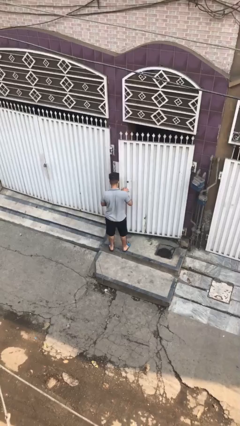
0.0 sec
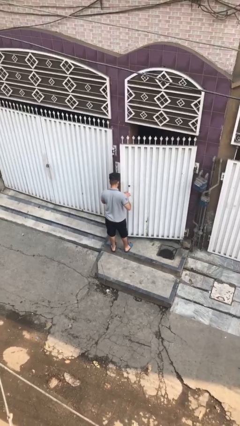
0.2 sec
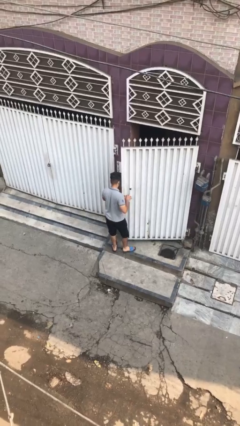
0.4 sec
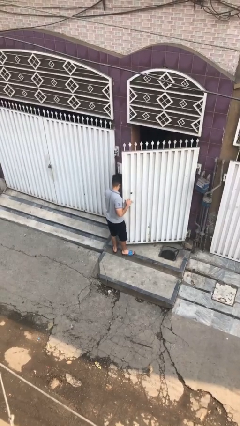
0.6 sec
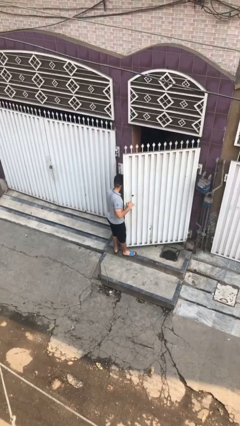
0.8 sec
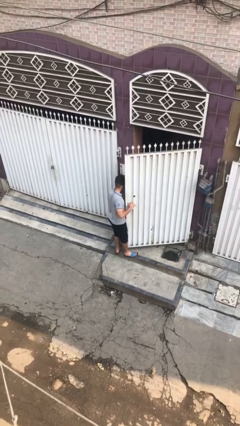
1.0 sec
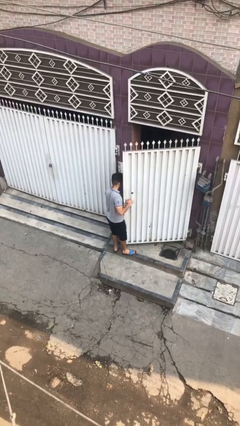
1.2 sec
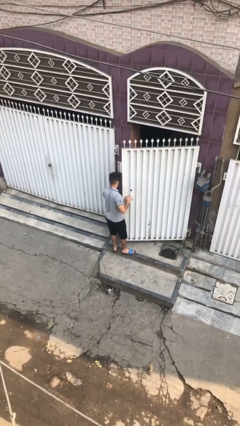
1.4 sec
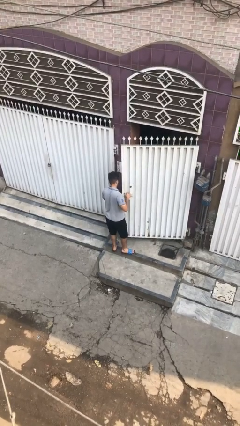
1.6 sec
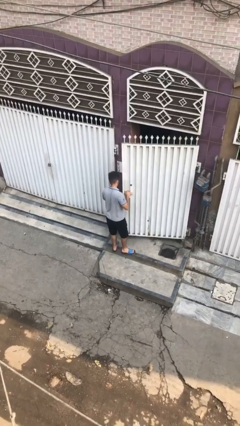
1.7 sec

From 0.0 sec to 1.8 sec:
person opens facility door

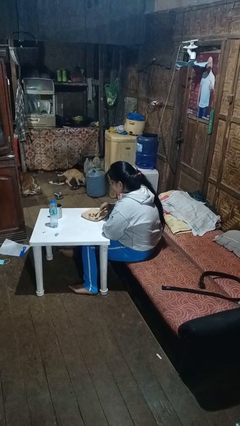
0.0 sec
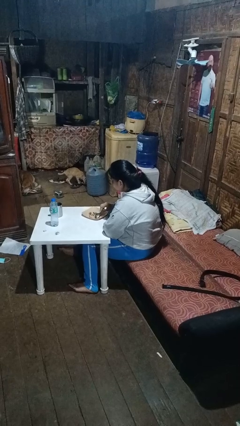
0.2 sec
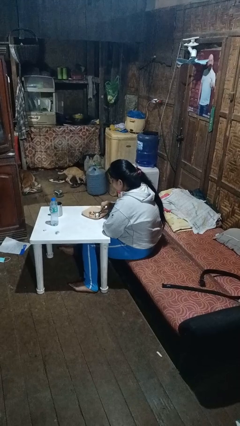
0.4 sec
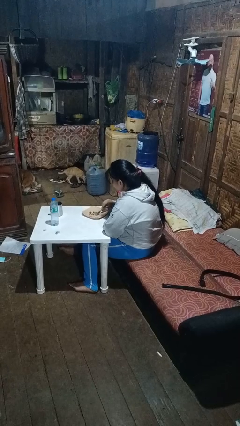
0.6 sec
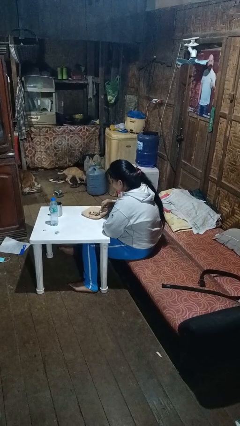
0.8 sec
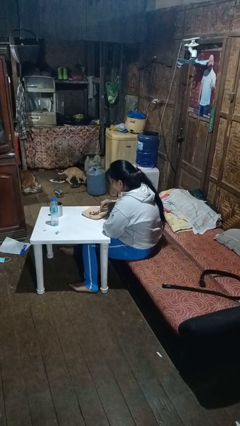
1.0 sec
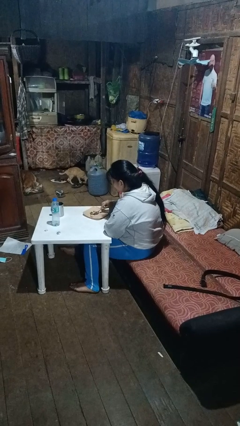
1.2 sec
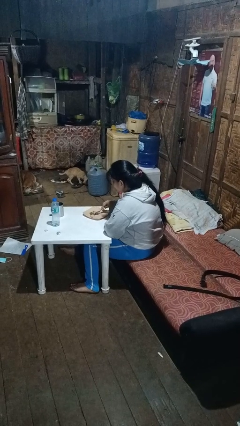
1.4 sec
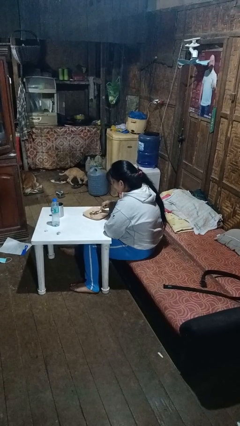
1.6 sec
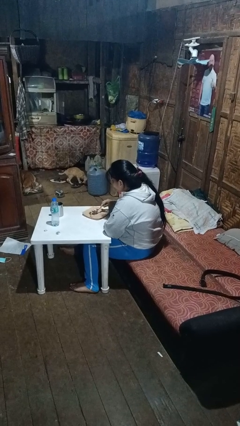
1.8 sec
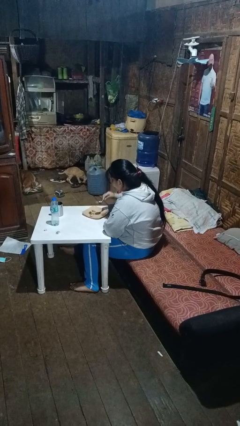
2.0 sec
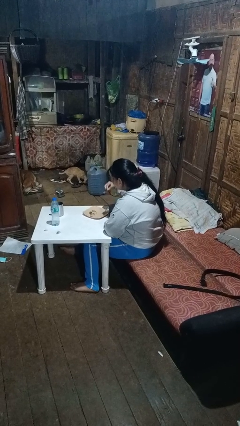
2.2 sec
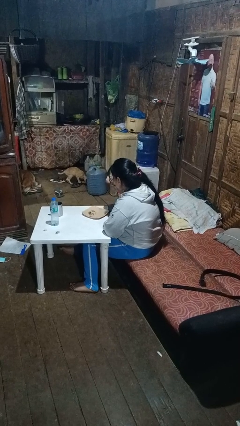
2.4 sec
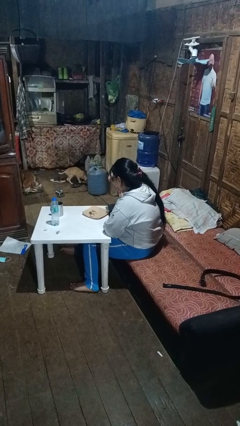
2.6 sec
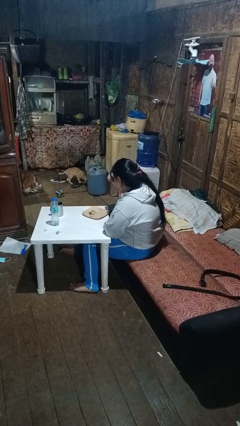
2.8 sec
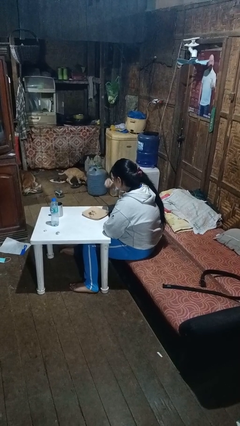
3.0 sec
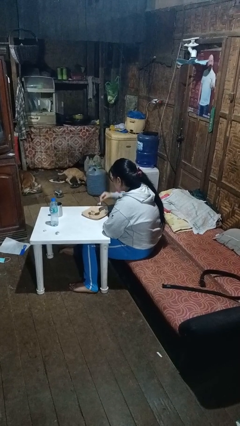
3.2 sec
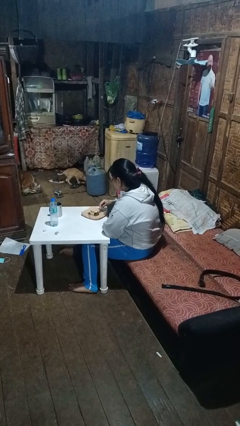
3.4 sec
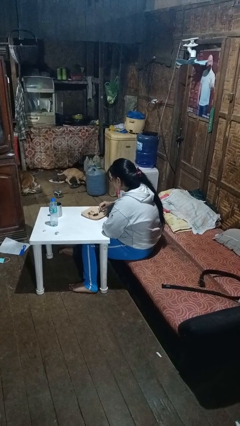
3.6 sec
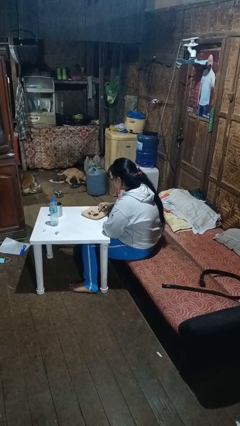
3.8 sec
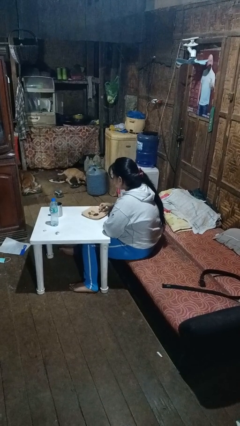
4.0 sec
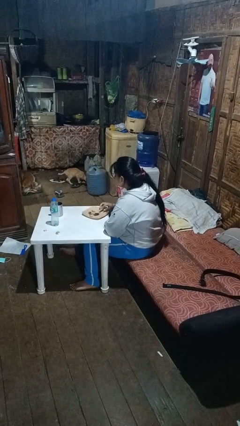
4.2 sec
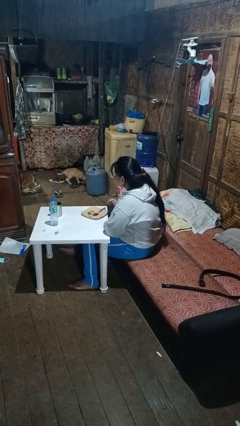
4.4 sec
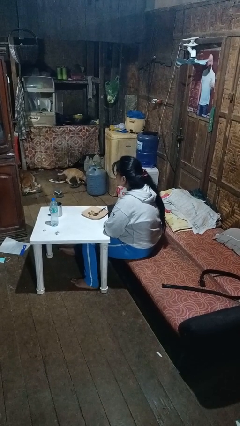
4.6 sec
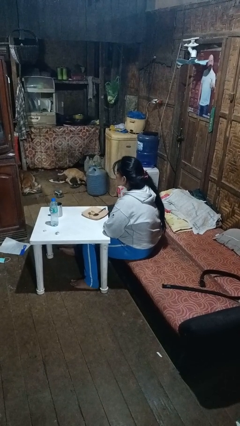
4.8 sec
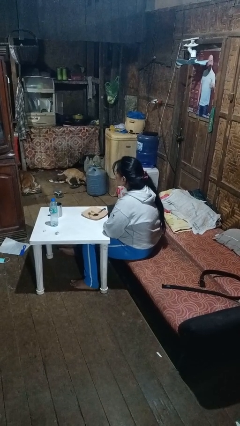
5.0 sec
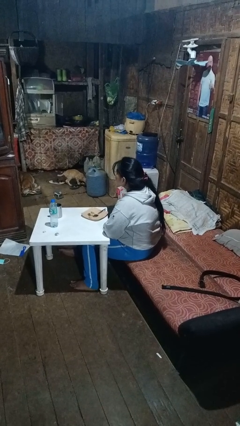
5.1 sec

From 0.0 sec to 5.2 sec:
person eats with utensil

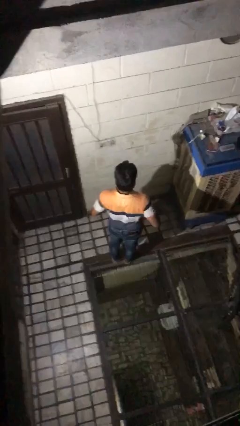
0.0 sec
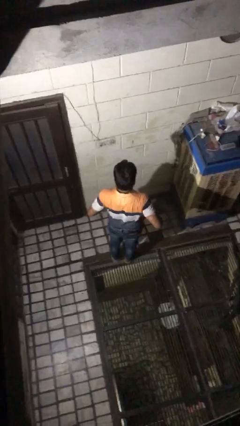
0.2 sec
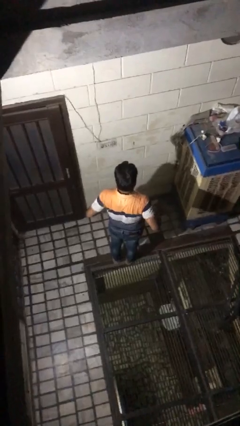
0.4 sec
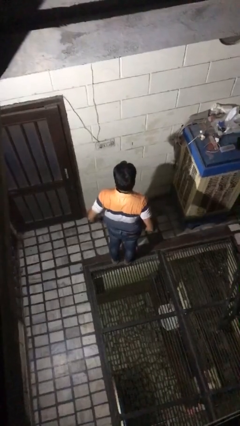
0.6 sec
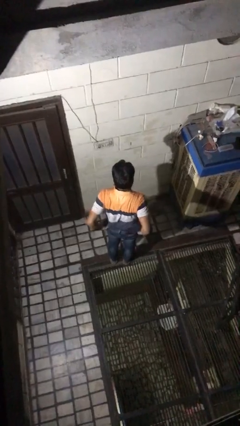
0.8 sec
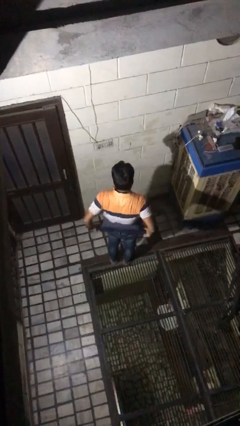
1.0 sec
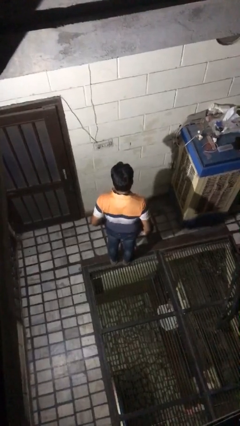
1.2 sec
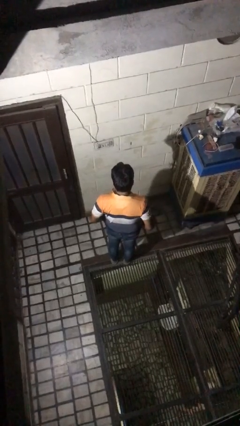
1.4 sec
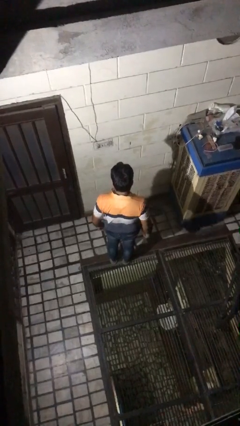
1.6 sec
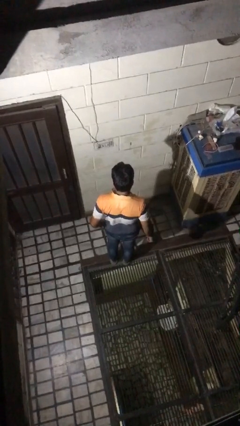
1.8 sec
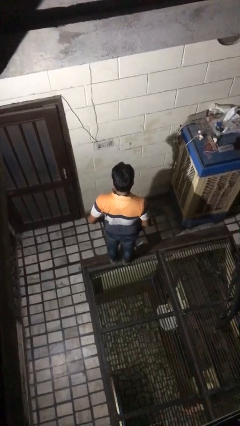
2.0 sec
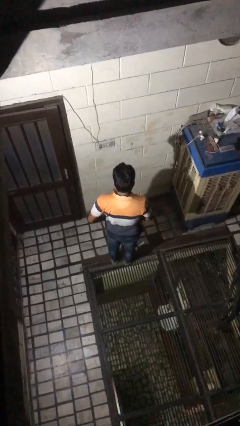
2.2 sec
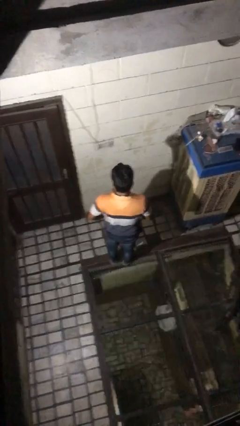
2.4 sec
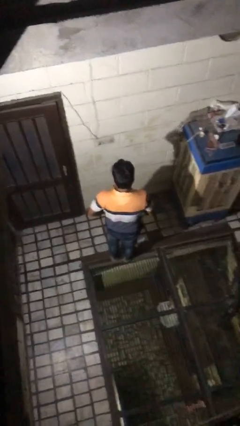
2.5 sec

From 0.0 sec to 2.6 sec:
person untucks shirt

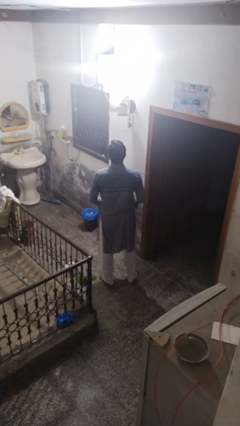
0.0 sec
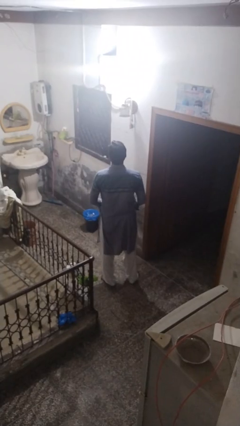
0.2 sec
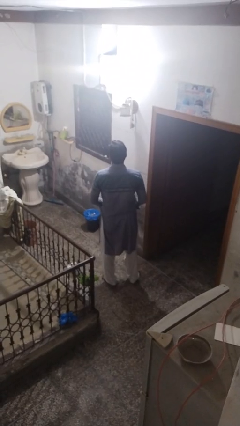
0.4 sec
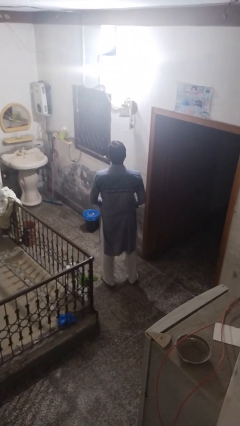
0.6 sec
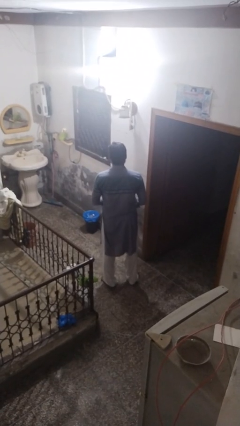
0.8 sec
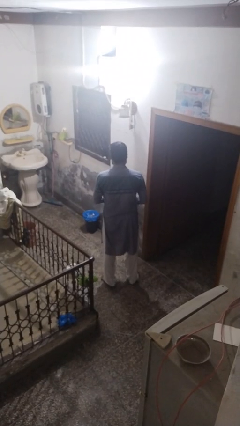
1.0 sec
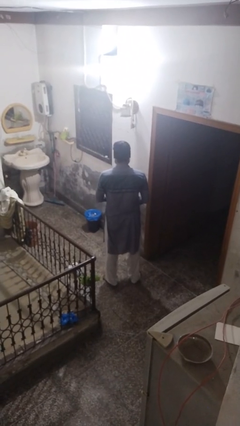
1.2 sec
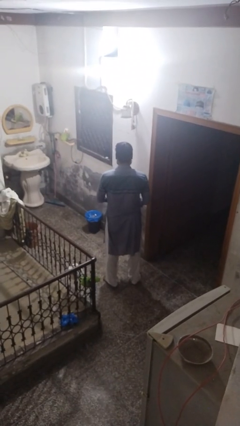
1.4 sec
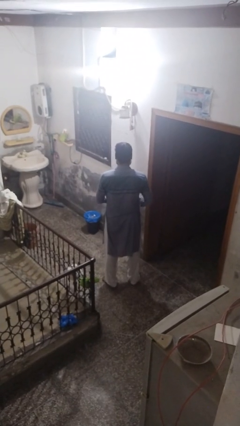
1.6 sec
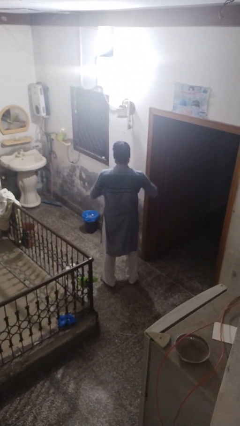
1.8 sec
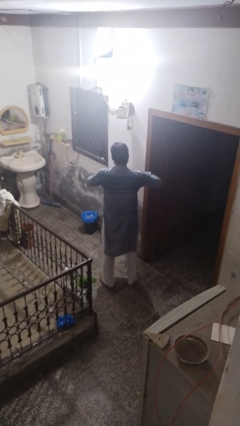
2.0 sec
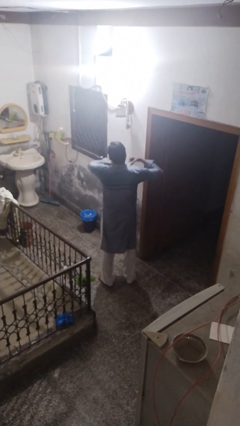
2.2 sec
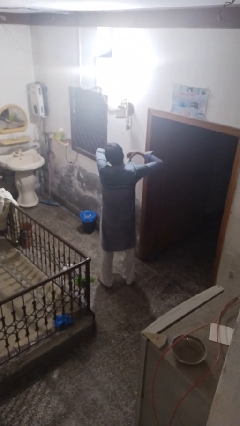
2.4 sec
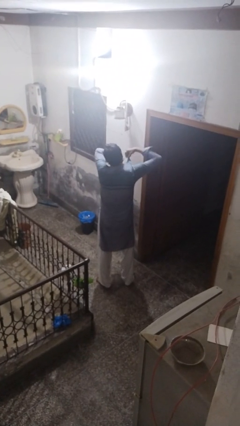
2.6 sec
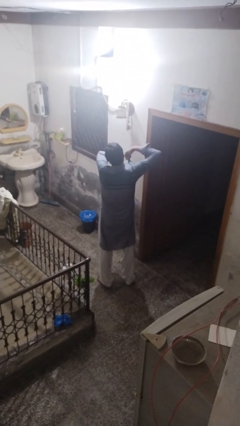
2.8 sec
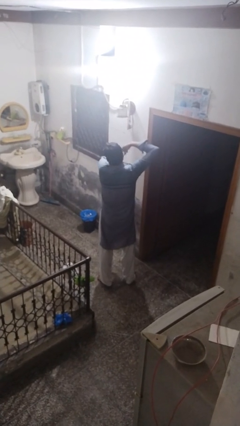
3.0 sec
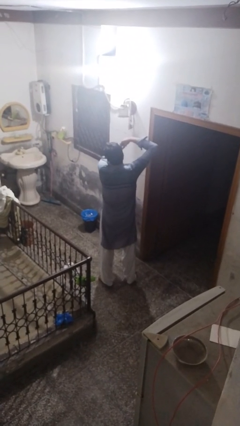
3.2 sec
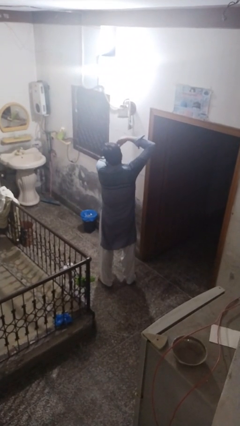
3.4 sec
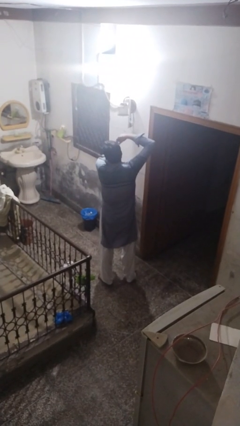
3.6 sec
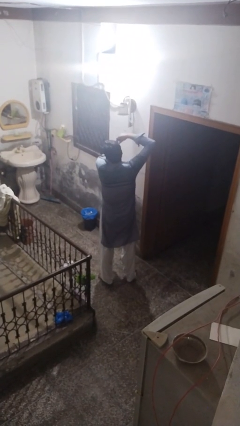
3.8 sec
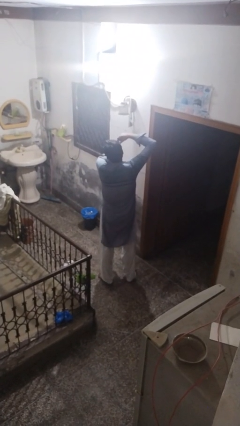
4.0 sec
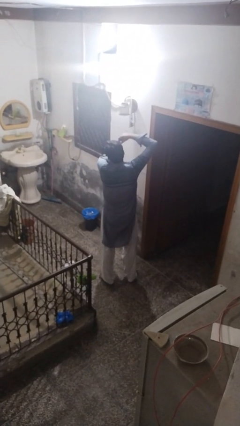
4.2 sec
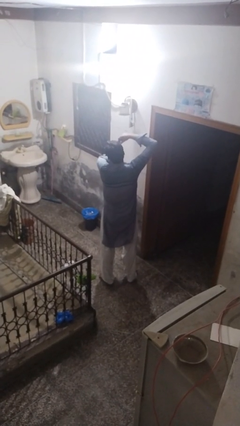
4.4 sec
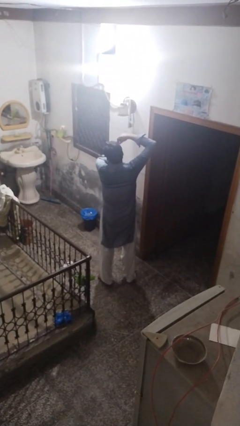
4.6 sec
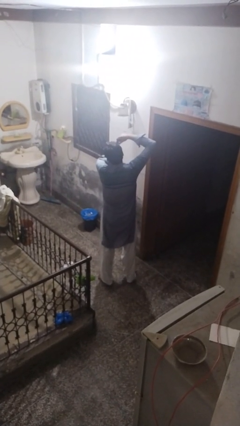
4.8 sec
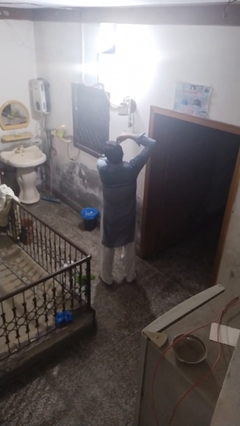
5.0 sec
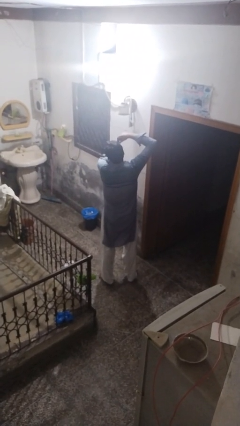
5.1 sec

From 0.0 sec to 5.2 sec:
person applies deodorant

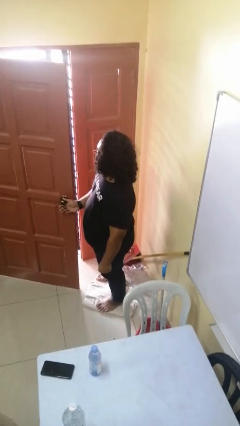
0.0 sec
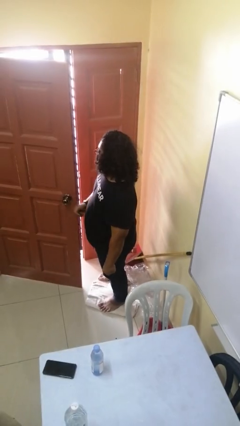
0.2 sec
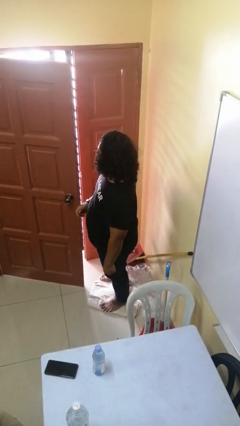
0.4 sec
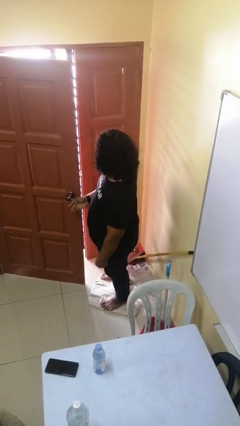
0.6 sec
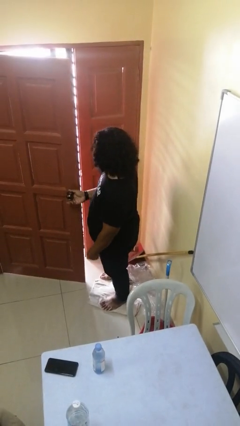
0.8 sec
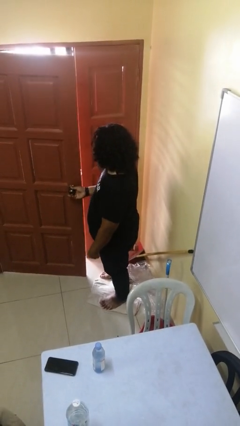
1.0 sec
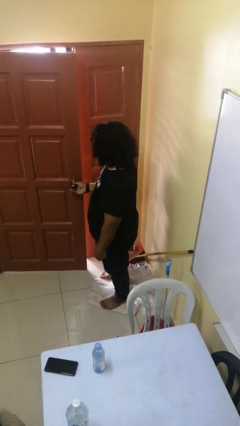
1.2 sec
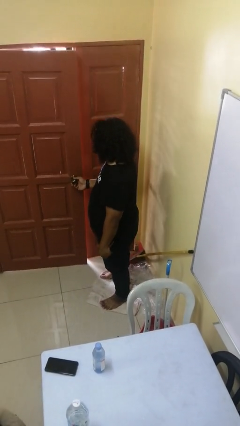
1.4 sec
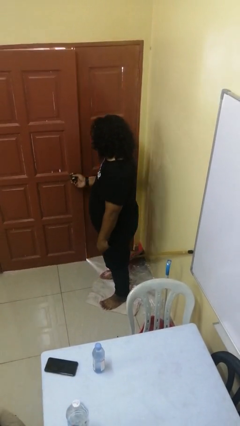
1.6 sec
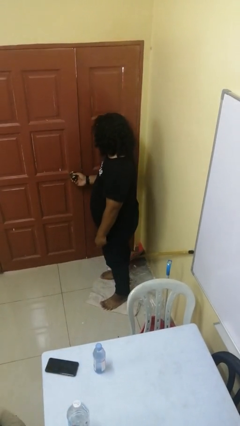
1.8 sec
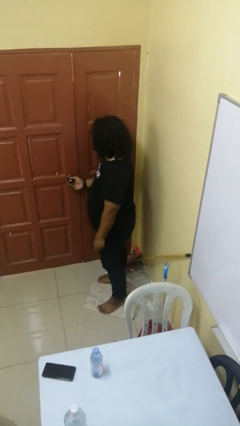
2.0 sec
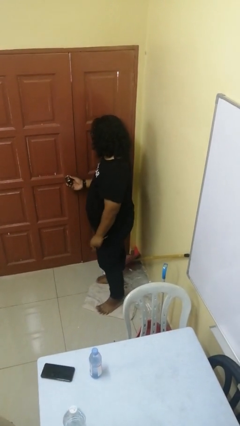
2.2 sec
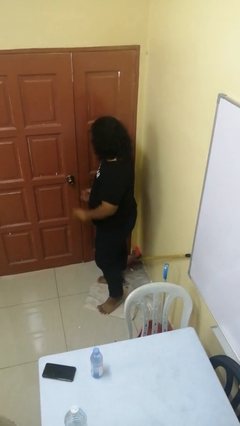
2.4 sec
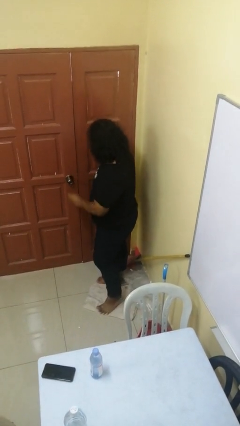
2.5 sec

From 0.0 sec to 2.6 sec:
person closes facility door

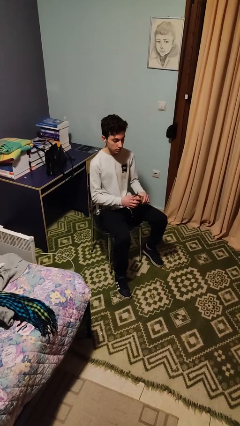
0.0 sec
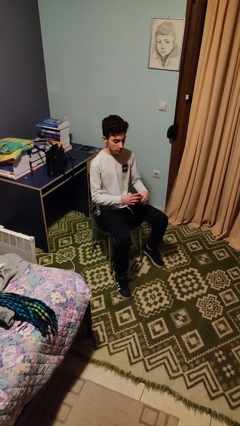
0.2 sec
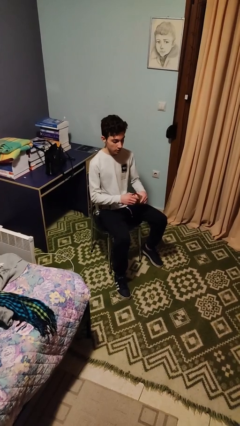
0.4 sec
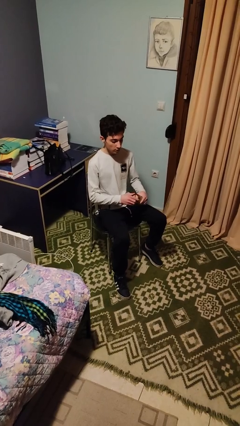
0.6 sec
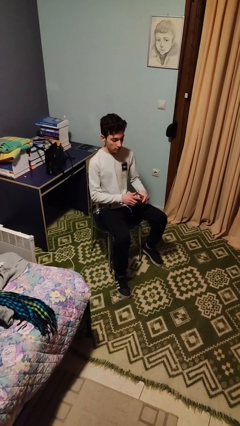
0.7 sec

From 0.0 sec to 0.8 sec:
person closes jar
